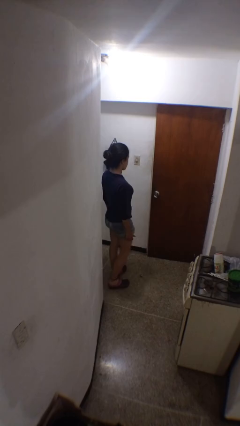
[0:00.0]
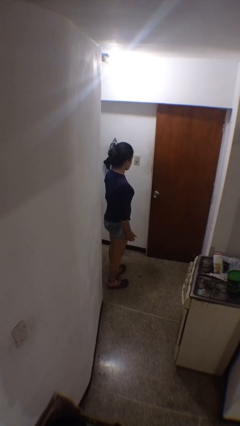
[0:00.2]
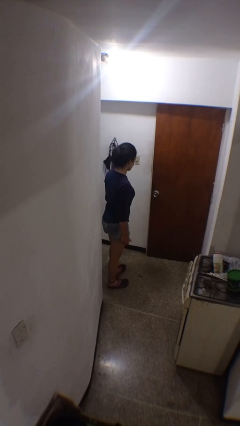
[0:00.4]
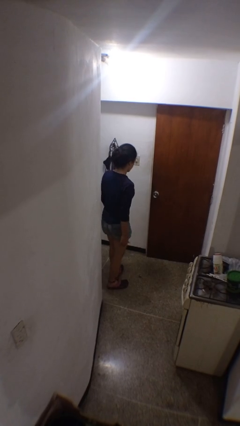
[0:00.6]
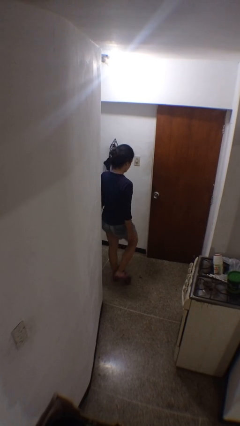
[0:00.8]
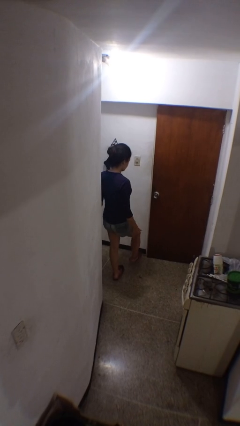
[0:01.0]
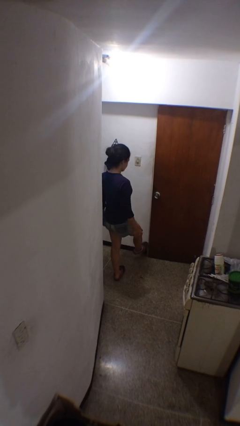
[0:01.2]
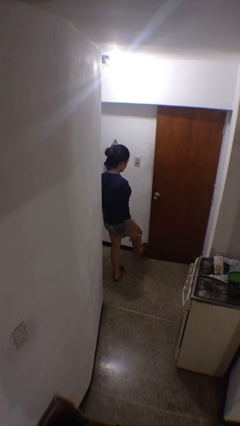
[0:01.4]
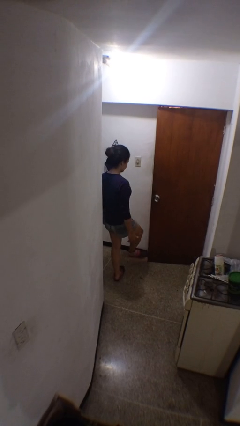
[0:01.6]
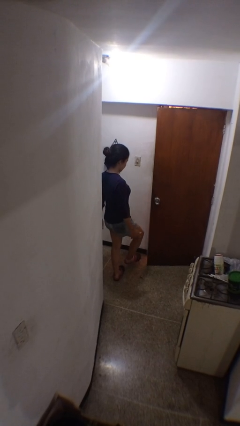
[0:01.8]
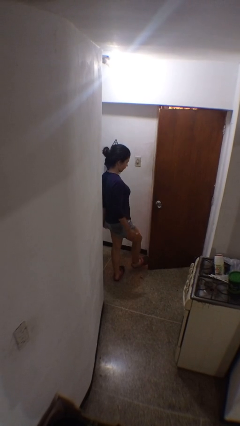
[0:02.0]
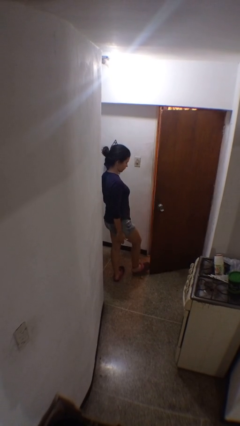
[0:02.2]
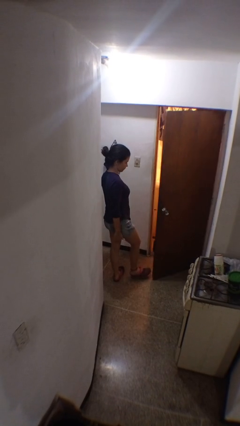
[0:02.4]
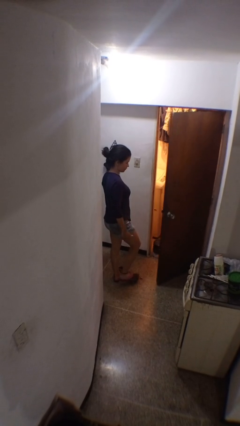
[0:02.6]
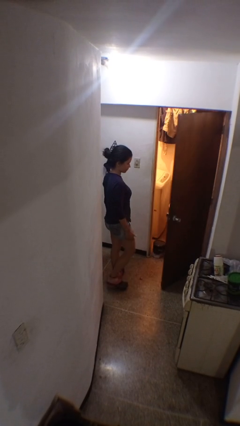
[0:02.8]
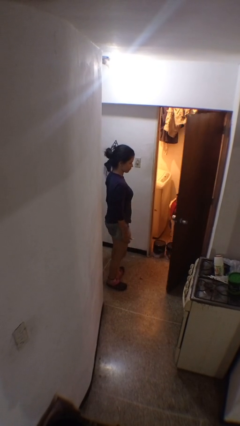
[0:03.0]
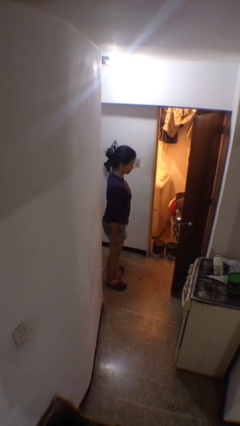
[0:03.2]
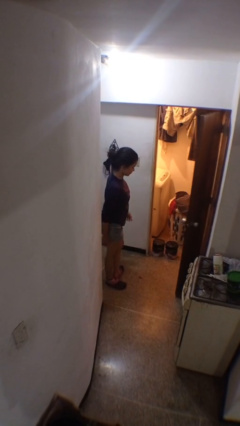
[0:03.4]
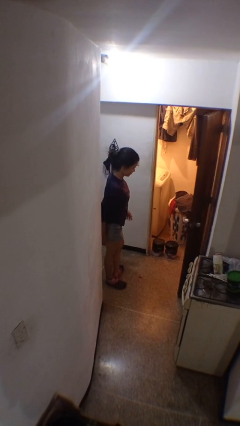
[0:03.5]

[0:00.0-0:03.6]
person opens facility door

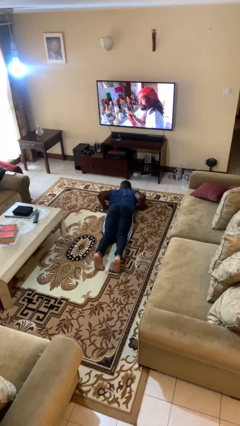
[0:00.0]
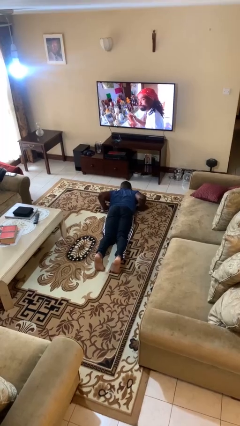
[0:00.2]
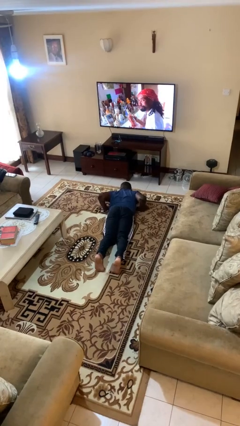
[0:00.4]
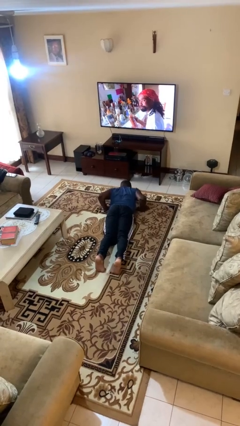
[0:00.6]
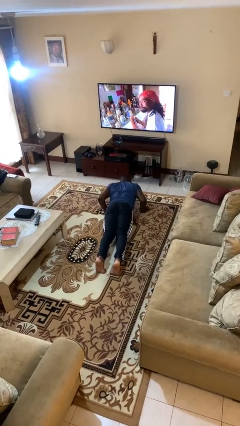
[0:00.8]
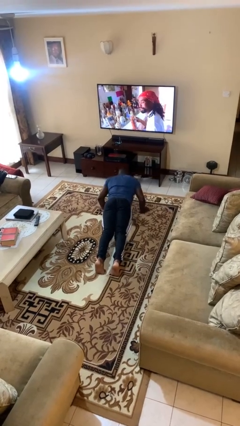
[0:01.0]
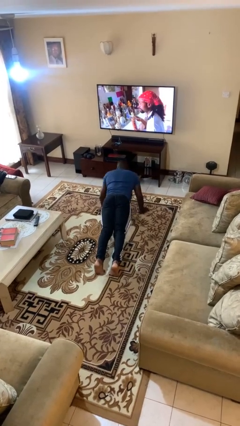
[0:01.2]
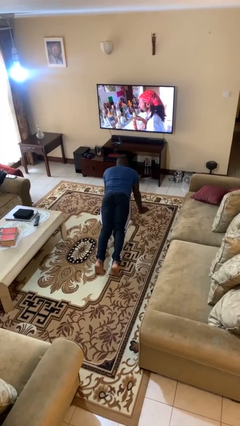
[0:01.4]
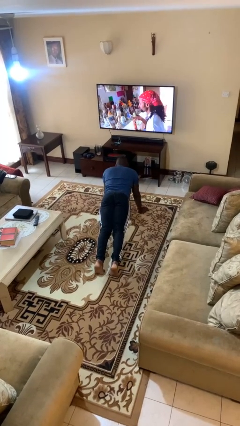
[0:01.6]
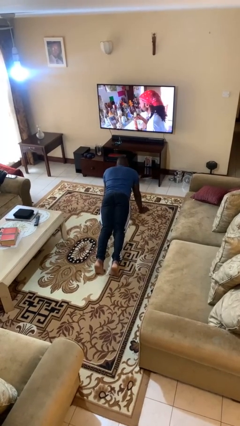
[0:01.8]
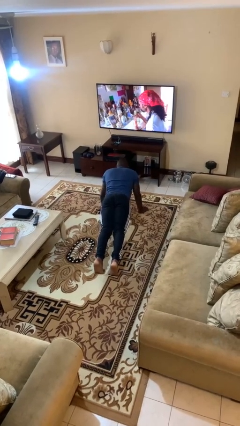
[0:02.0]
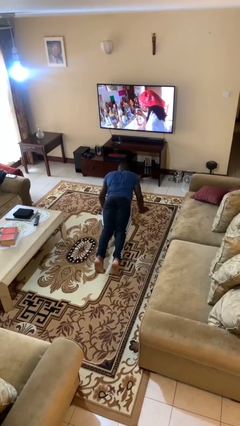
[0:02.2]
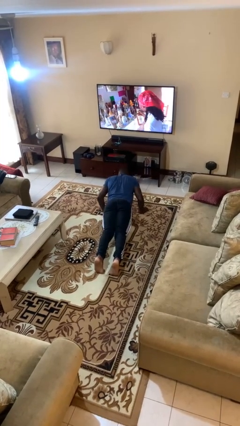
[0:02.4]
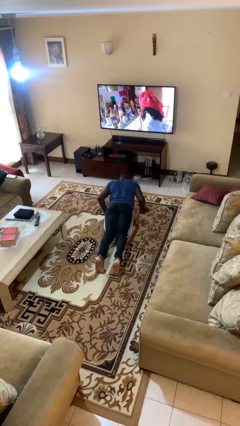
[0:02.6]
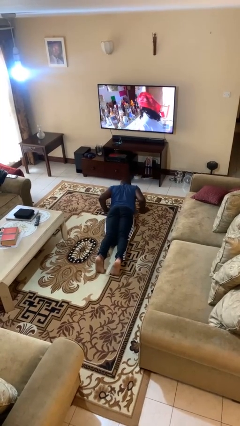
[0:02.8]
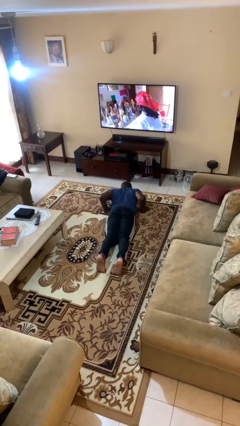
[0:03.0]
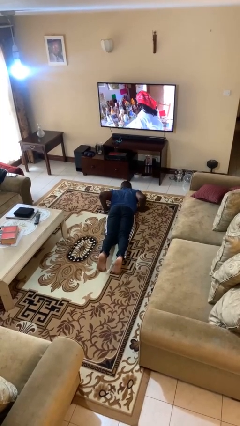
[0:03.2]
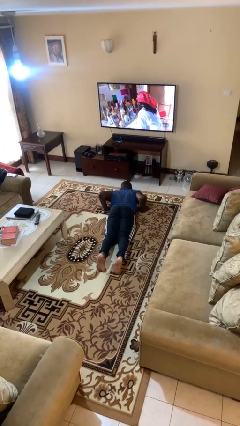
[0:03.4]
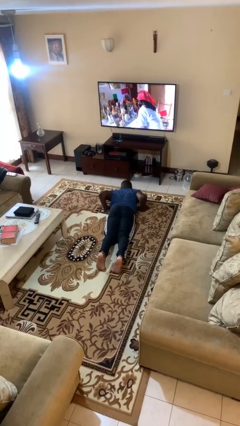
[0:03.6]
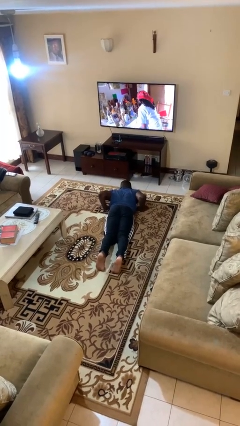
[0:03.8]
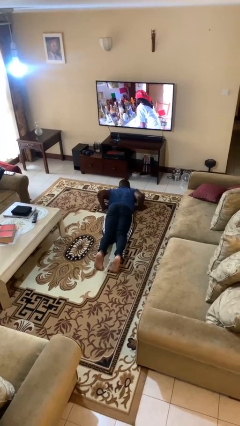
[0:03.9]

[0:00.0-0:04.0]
person exercises with pushup

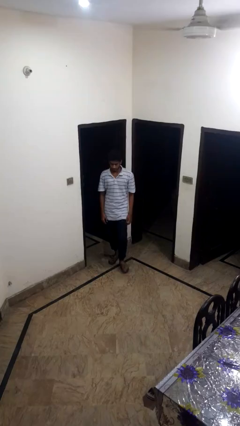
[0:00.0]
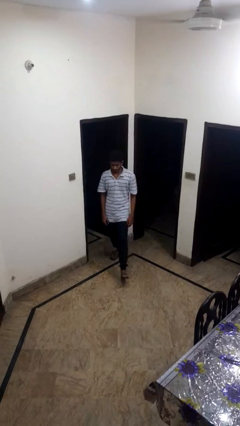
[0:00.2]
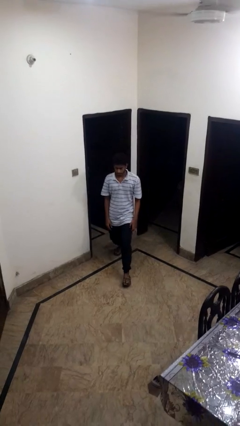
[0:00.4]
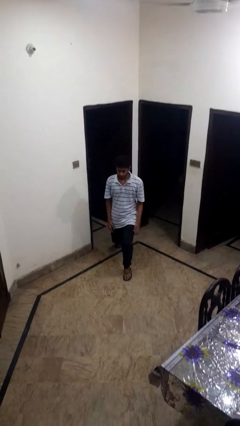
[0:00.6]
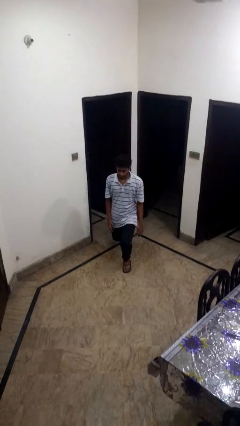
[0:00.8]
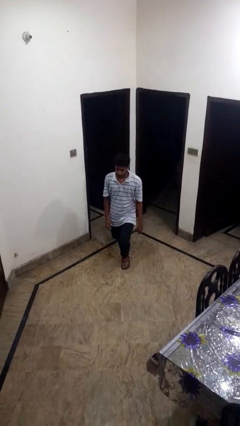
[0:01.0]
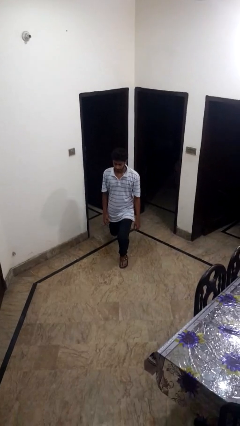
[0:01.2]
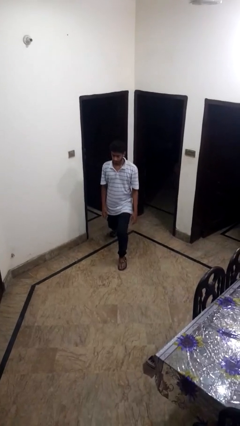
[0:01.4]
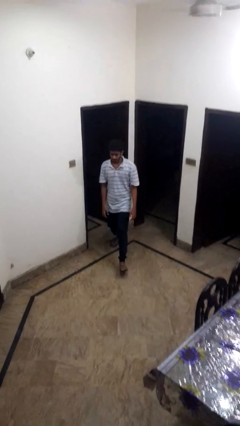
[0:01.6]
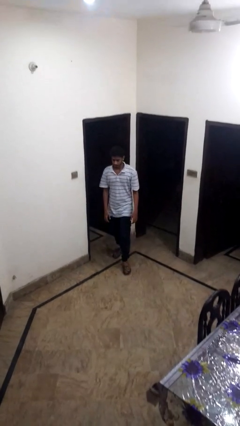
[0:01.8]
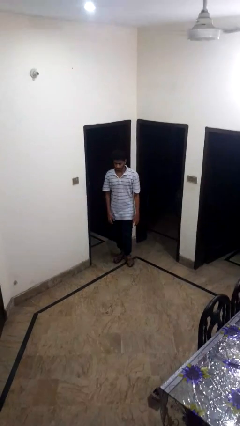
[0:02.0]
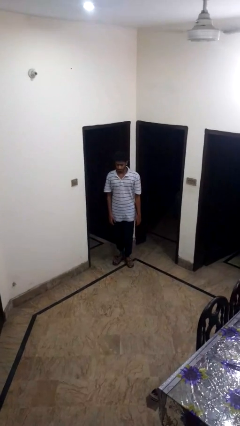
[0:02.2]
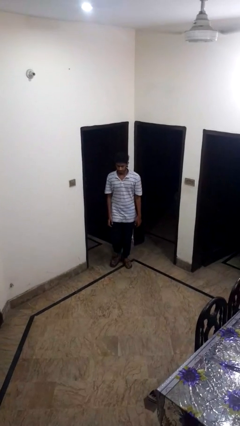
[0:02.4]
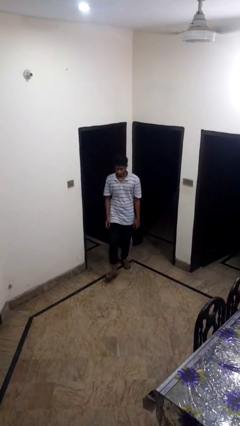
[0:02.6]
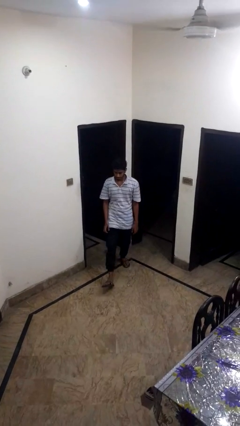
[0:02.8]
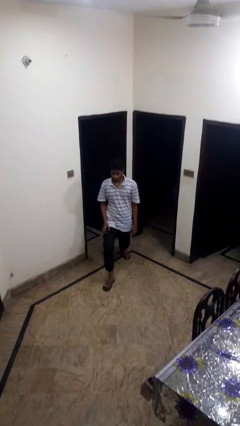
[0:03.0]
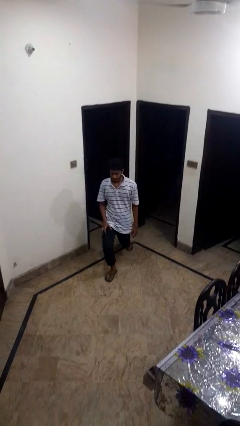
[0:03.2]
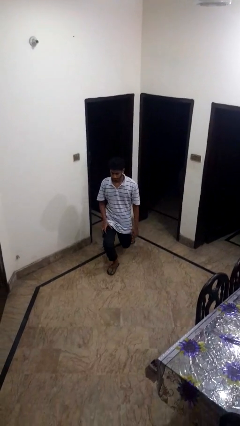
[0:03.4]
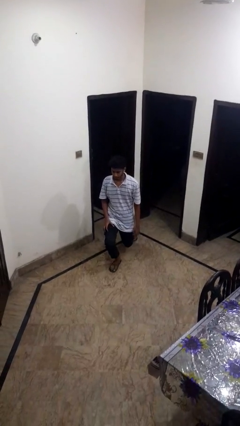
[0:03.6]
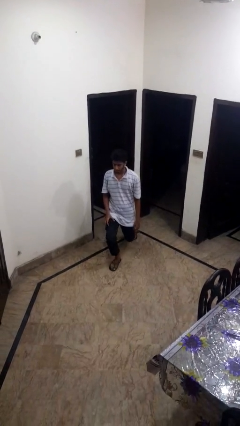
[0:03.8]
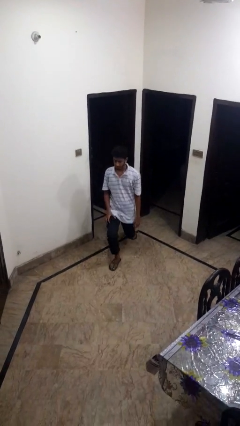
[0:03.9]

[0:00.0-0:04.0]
person exercises with lunges

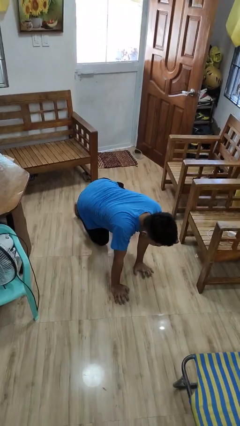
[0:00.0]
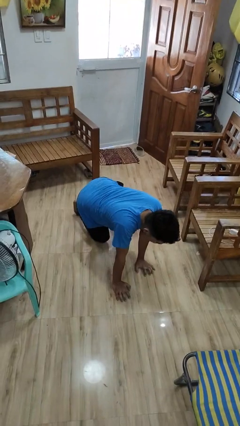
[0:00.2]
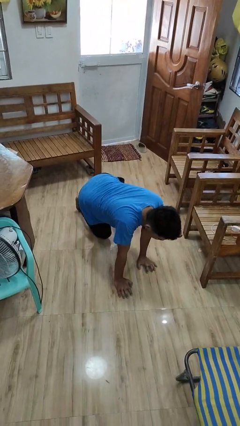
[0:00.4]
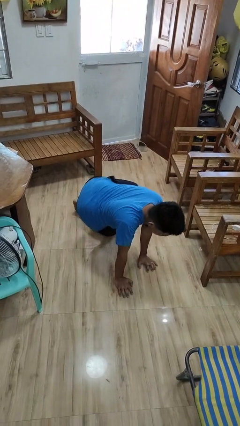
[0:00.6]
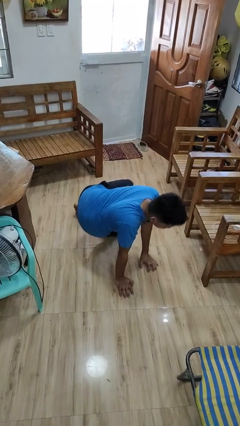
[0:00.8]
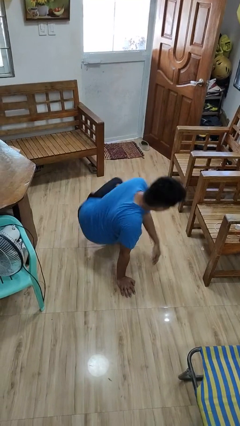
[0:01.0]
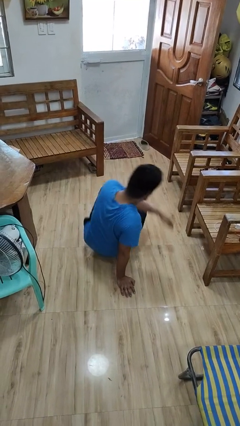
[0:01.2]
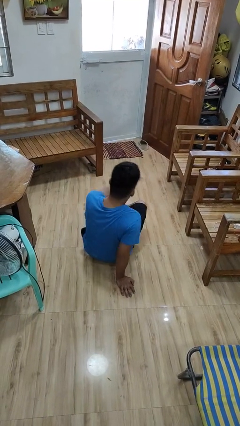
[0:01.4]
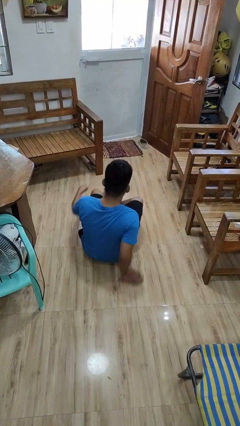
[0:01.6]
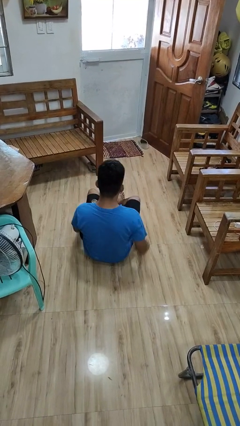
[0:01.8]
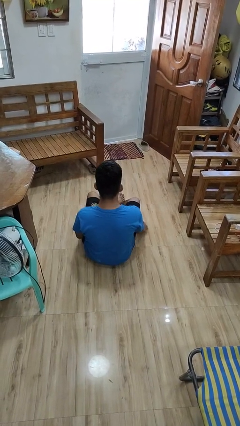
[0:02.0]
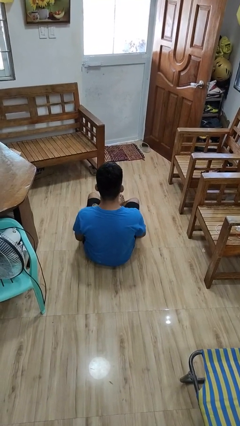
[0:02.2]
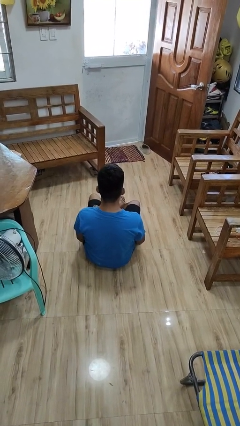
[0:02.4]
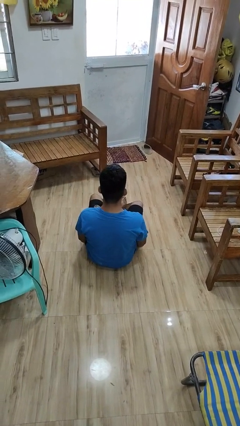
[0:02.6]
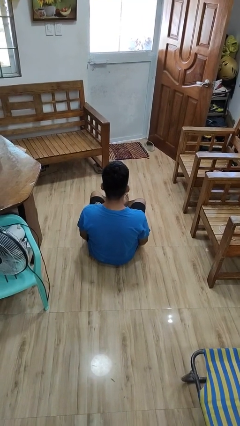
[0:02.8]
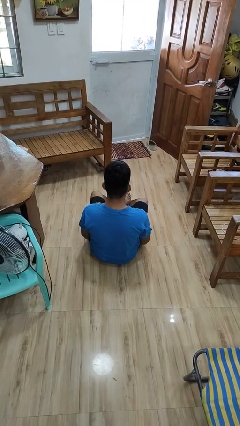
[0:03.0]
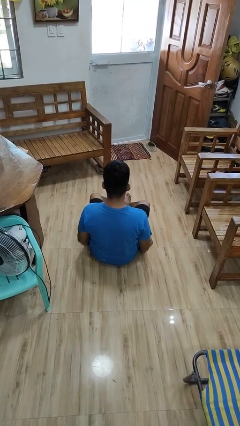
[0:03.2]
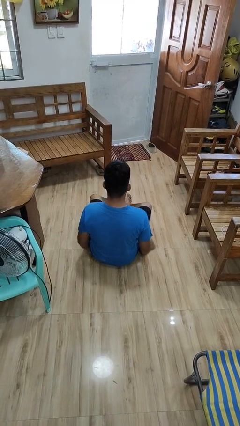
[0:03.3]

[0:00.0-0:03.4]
person lies down on floor

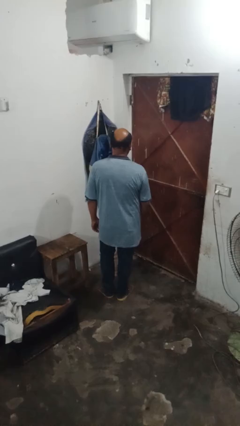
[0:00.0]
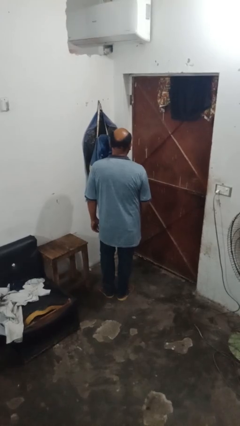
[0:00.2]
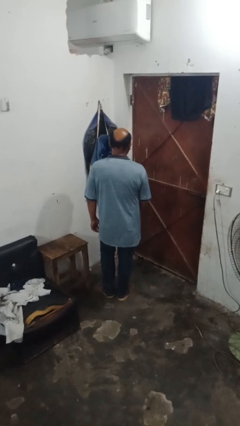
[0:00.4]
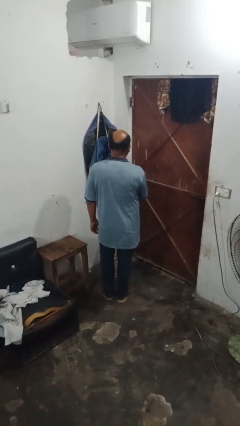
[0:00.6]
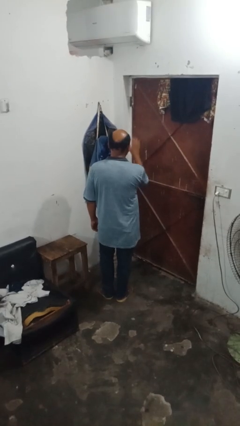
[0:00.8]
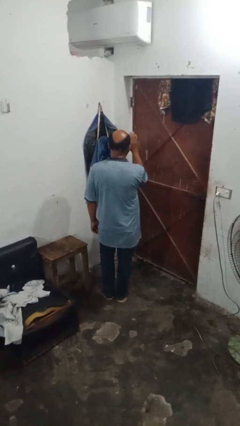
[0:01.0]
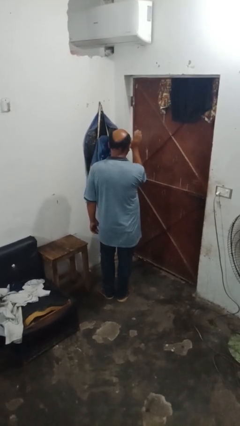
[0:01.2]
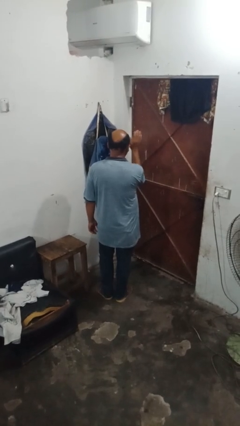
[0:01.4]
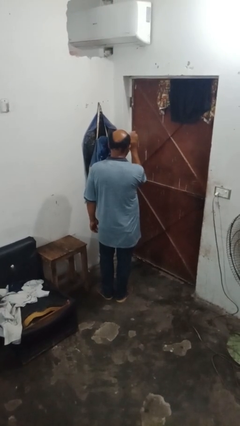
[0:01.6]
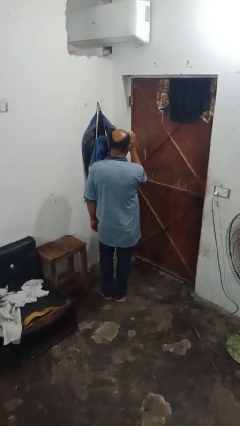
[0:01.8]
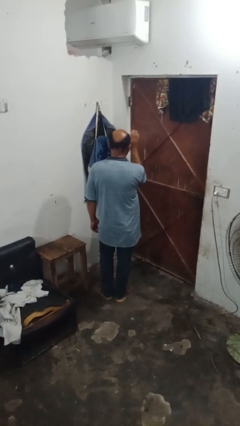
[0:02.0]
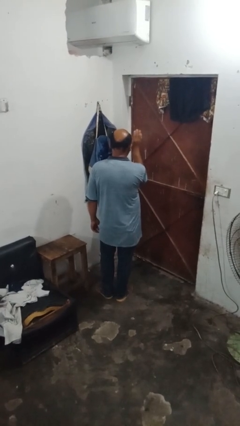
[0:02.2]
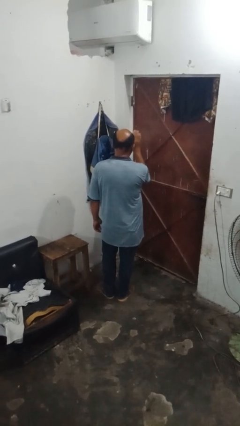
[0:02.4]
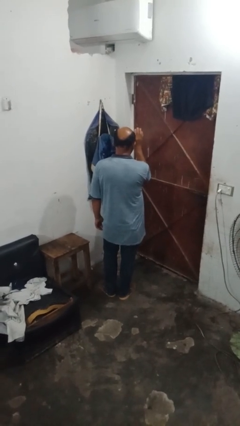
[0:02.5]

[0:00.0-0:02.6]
person waves hand over object
